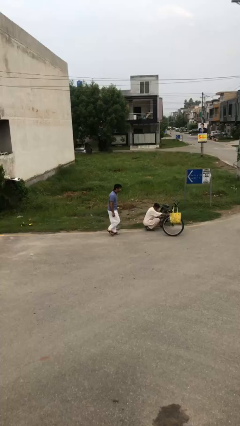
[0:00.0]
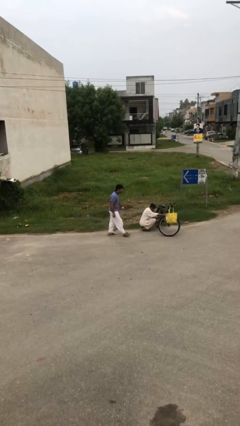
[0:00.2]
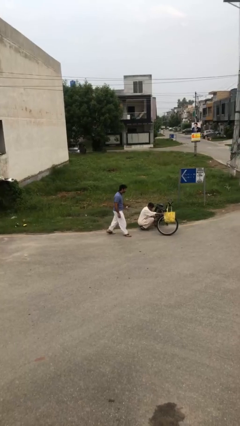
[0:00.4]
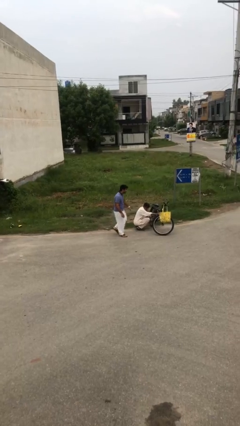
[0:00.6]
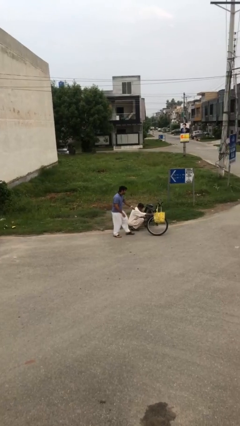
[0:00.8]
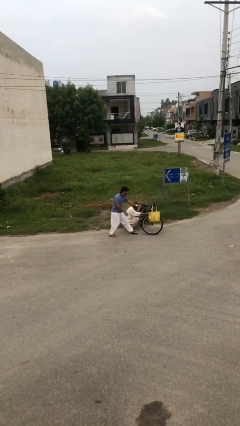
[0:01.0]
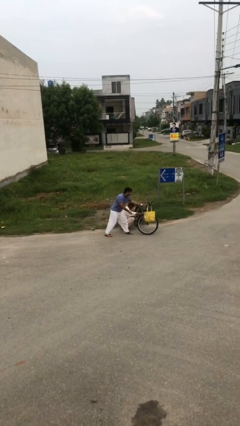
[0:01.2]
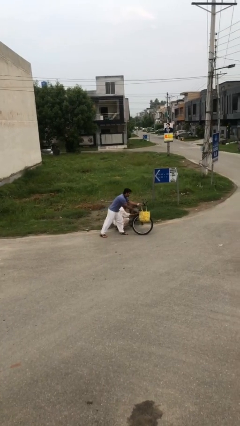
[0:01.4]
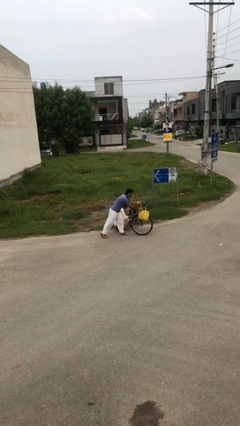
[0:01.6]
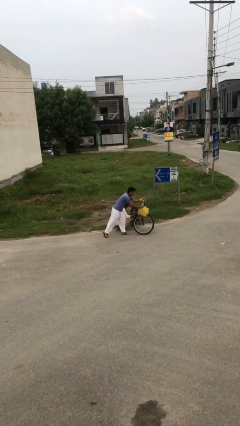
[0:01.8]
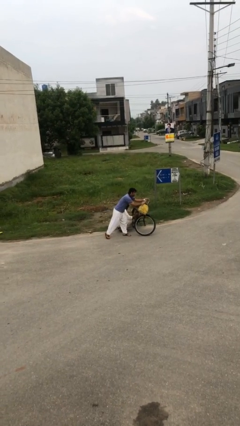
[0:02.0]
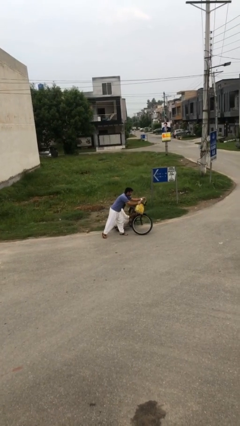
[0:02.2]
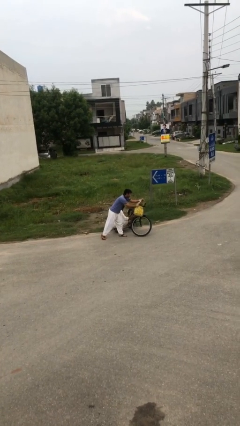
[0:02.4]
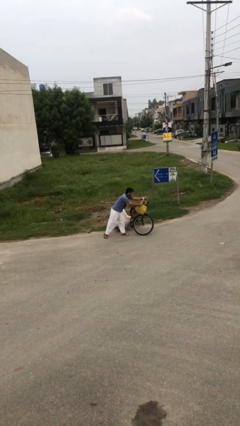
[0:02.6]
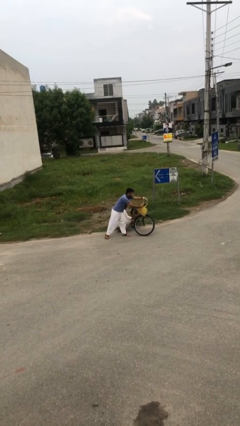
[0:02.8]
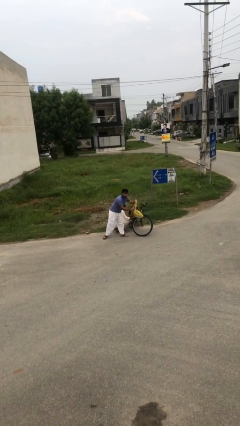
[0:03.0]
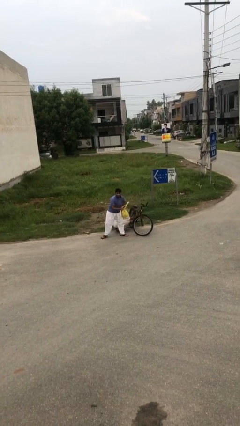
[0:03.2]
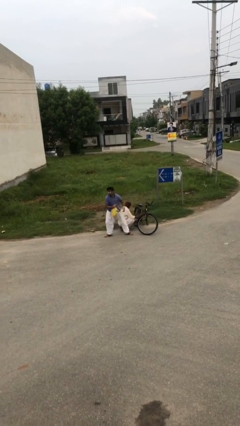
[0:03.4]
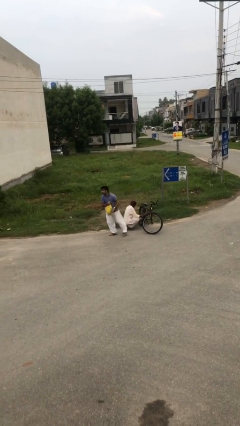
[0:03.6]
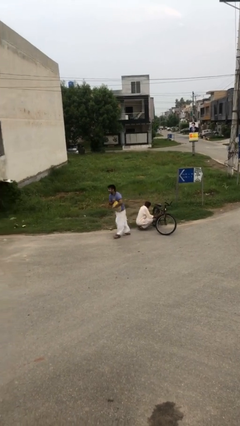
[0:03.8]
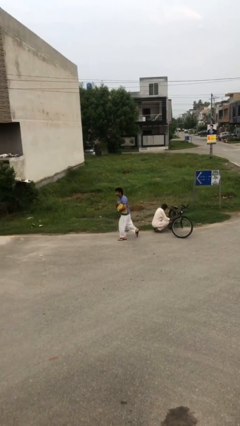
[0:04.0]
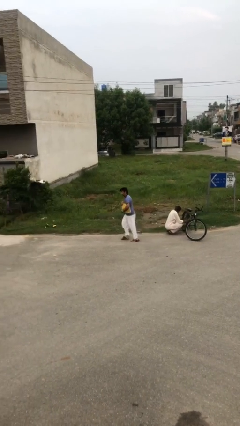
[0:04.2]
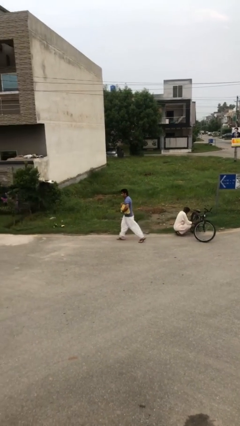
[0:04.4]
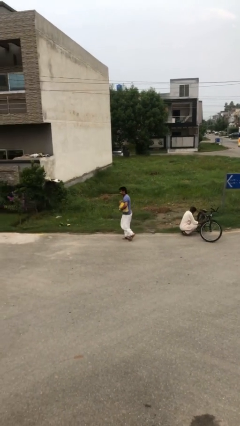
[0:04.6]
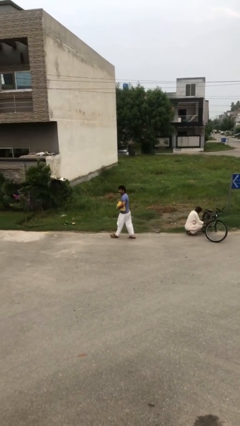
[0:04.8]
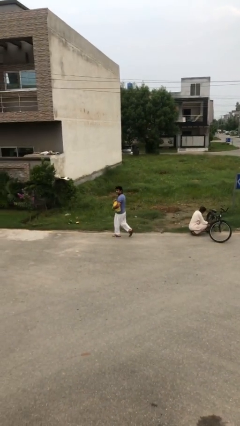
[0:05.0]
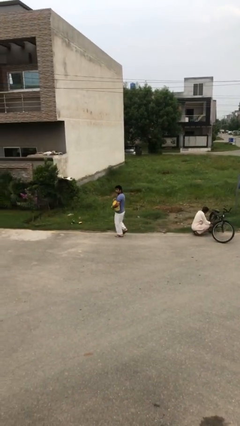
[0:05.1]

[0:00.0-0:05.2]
person steals object from person

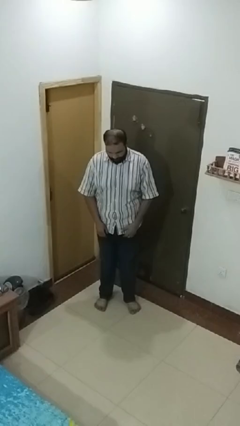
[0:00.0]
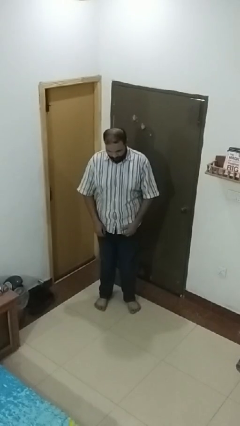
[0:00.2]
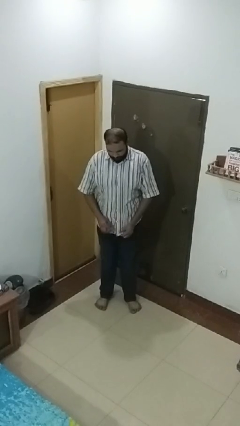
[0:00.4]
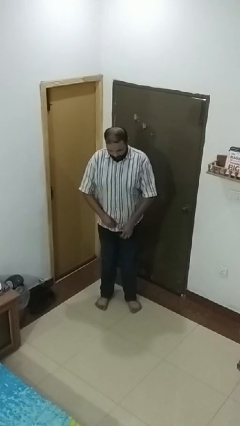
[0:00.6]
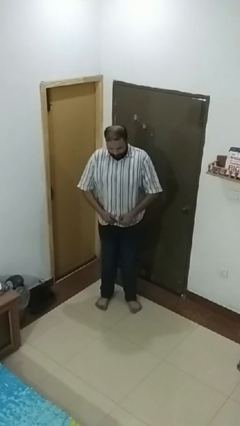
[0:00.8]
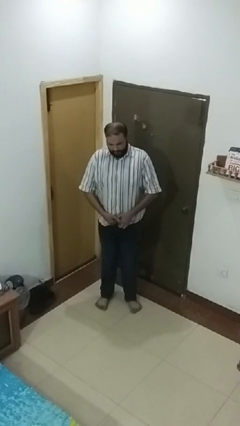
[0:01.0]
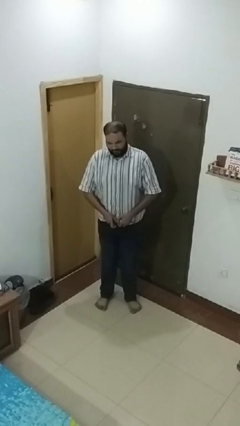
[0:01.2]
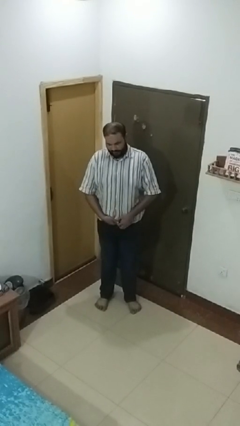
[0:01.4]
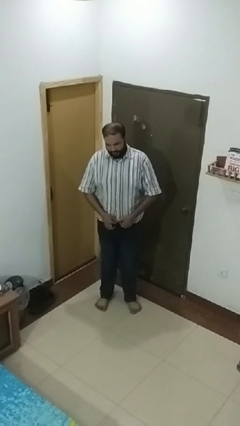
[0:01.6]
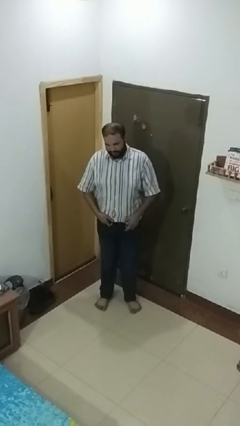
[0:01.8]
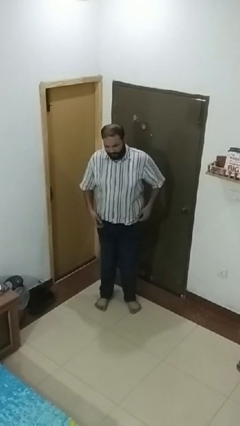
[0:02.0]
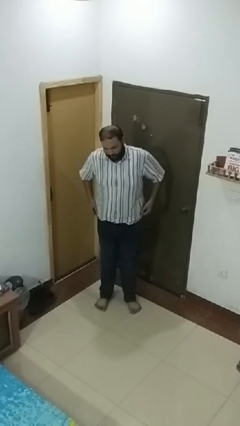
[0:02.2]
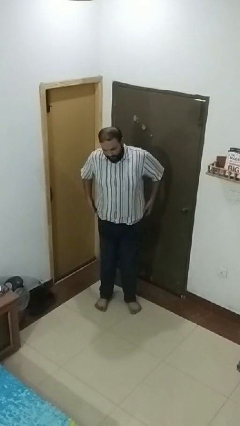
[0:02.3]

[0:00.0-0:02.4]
person tucks in shirt

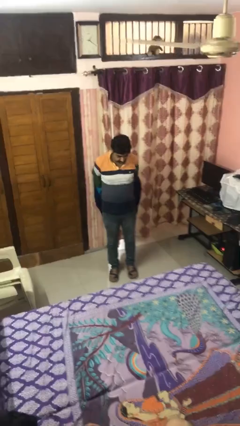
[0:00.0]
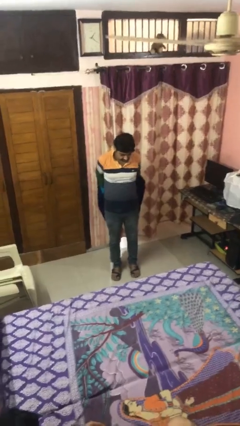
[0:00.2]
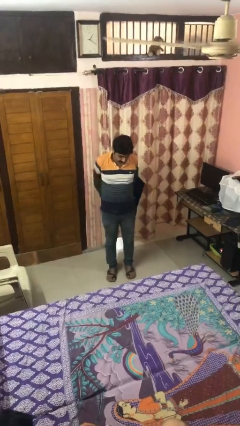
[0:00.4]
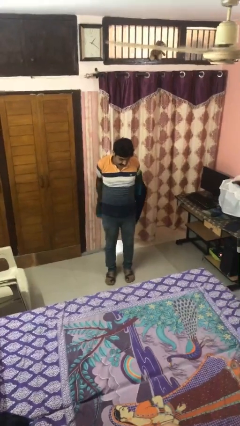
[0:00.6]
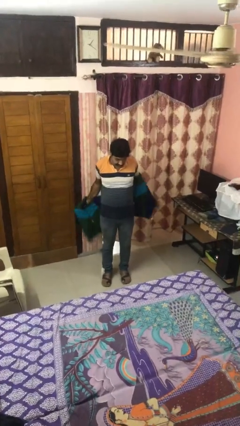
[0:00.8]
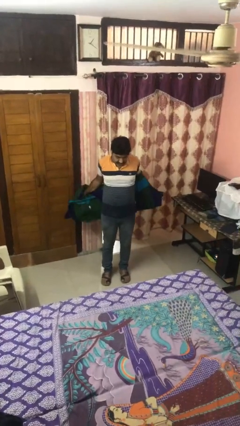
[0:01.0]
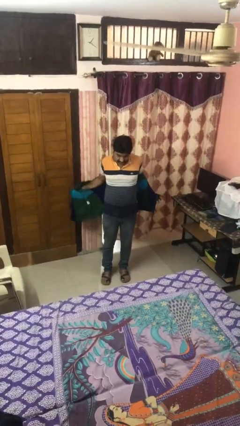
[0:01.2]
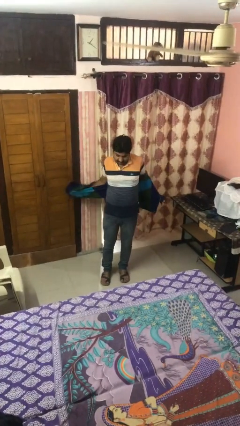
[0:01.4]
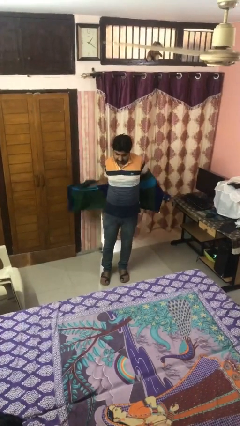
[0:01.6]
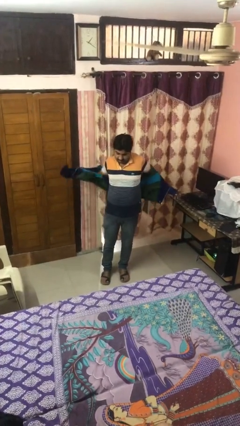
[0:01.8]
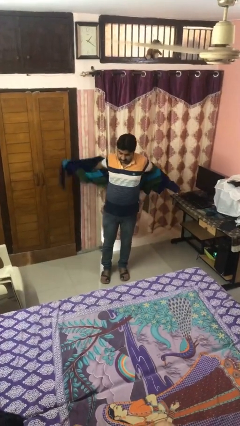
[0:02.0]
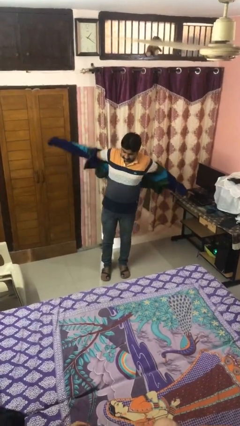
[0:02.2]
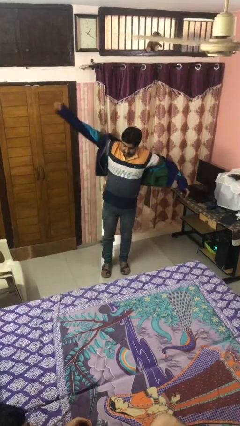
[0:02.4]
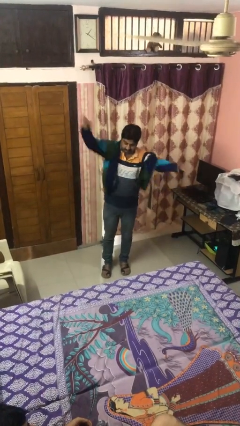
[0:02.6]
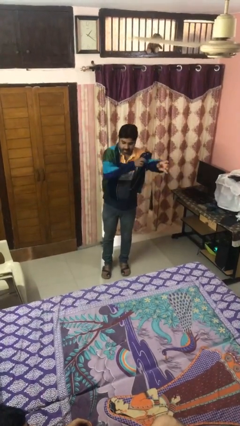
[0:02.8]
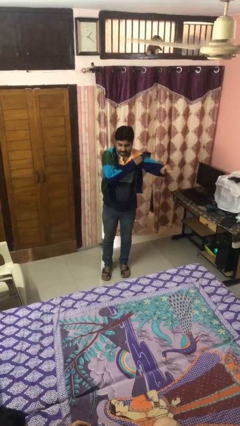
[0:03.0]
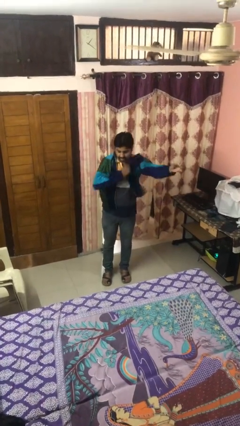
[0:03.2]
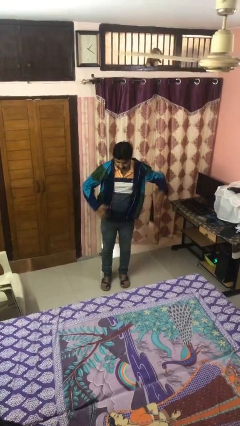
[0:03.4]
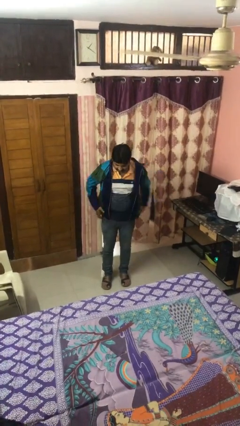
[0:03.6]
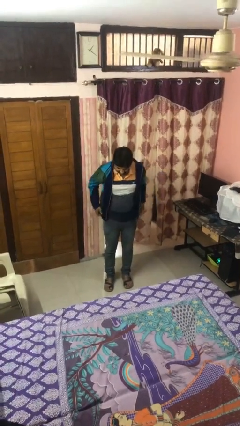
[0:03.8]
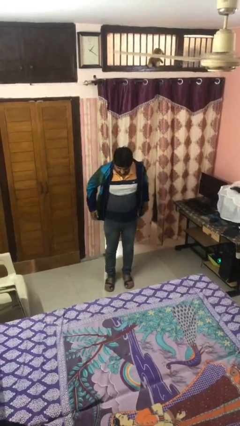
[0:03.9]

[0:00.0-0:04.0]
person puts on jacket

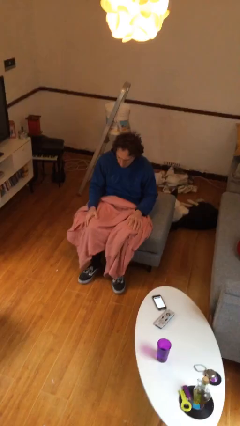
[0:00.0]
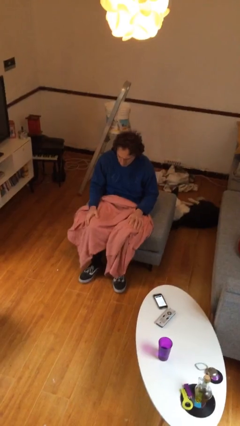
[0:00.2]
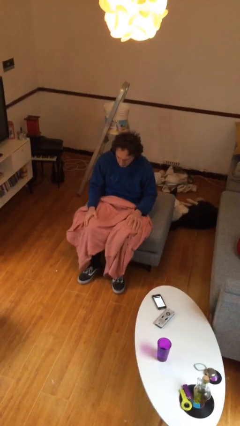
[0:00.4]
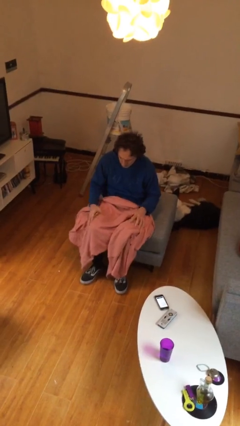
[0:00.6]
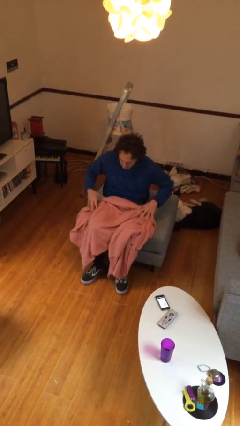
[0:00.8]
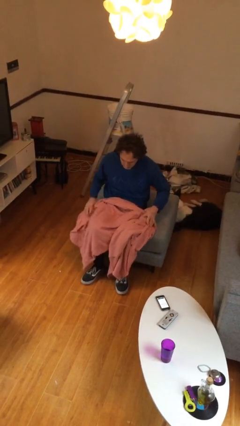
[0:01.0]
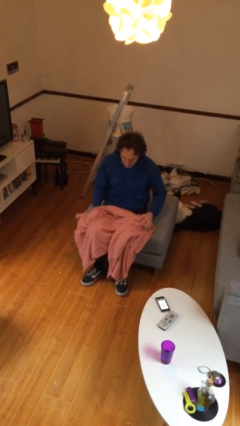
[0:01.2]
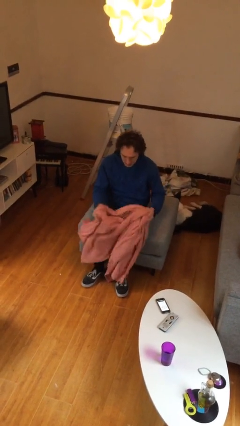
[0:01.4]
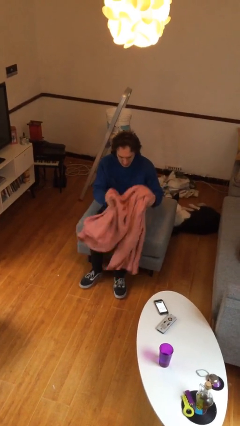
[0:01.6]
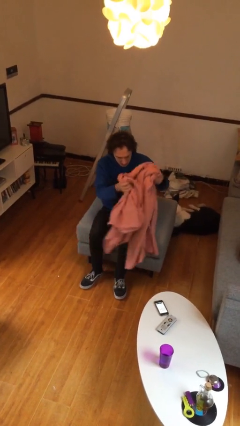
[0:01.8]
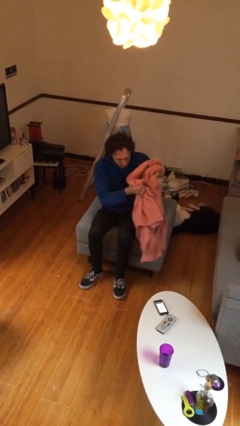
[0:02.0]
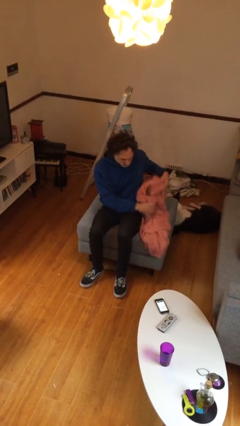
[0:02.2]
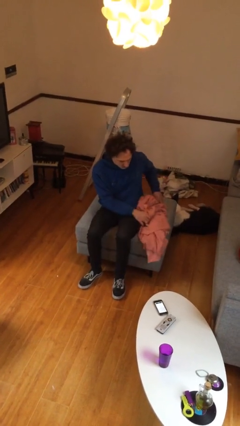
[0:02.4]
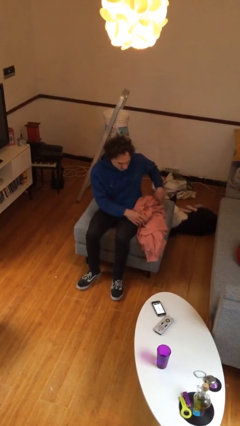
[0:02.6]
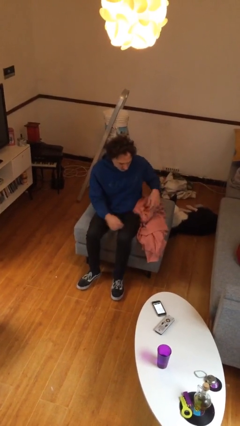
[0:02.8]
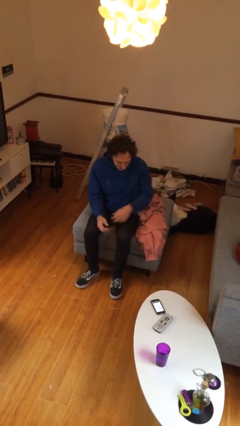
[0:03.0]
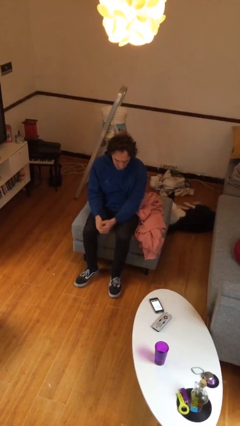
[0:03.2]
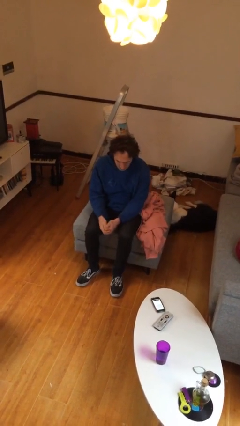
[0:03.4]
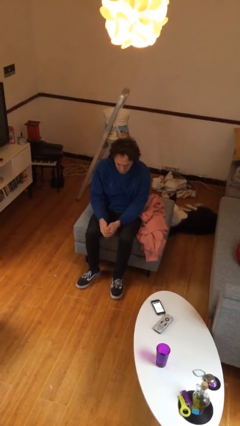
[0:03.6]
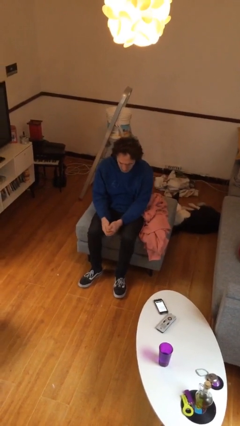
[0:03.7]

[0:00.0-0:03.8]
person uncovers with blanket

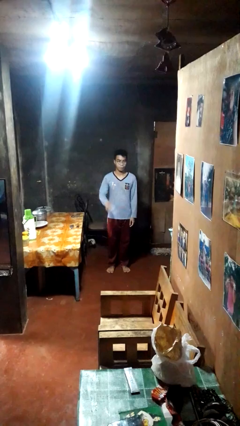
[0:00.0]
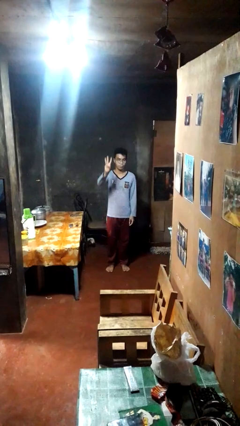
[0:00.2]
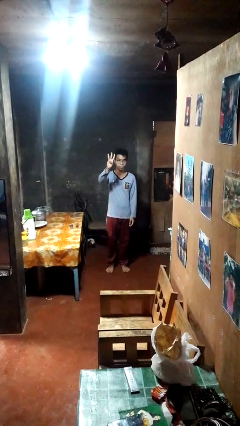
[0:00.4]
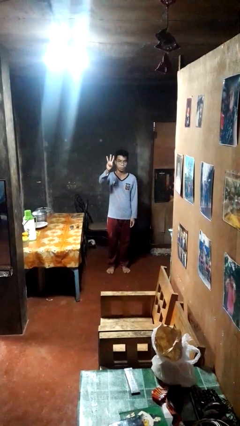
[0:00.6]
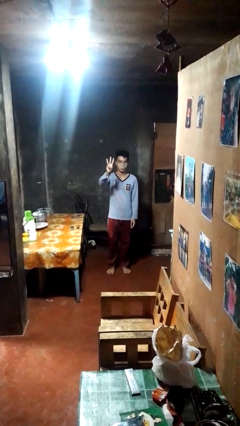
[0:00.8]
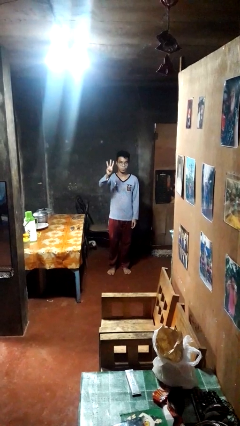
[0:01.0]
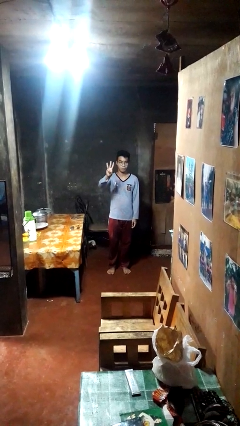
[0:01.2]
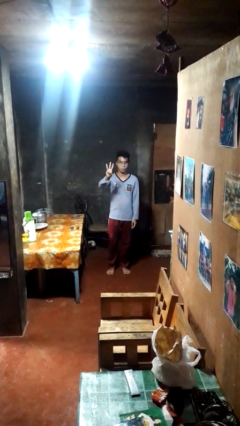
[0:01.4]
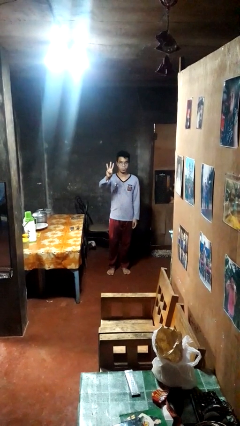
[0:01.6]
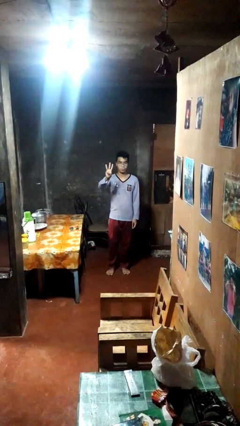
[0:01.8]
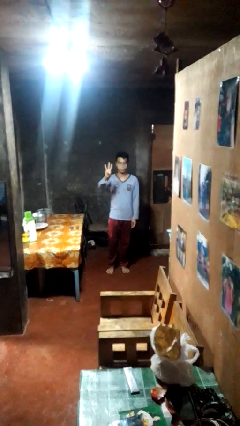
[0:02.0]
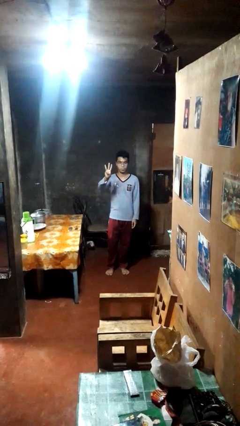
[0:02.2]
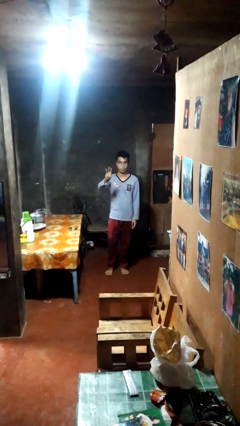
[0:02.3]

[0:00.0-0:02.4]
person gestures number three
